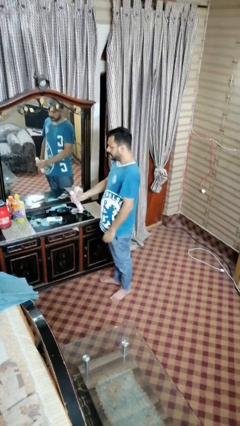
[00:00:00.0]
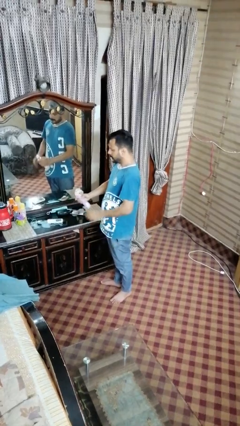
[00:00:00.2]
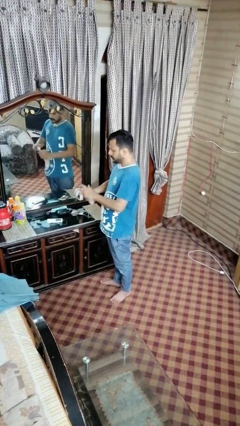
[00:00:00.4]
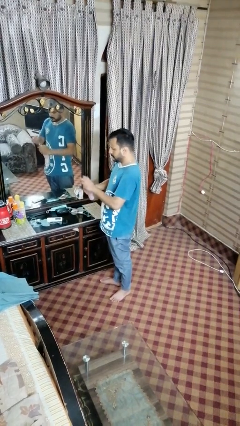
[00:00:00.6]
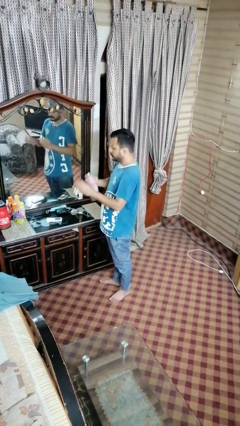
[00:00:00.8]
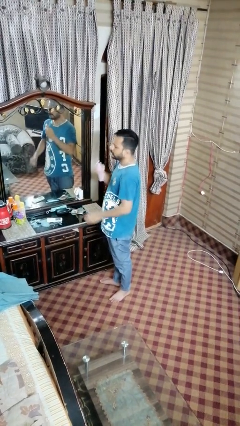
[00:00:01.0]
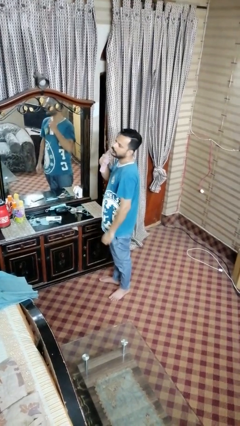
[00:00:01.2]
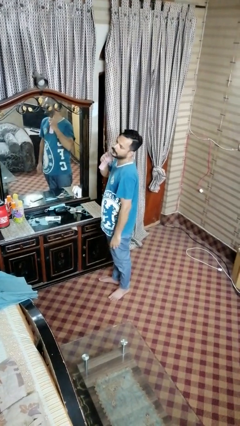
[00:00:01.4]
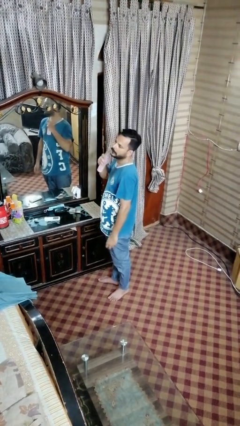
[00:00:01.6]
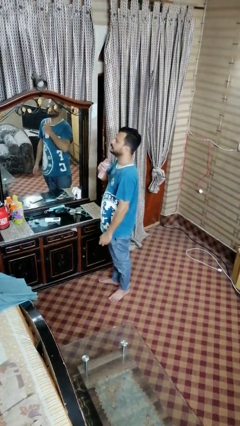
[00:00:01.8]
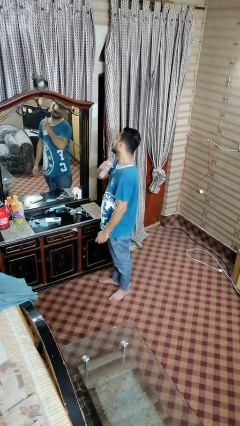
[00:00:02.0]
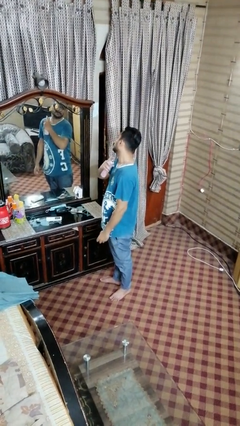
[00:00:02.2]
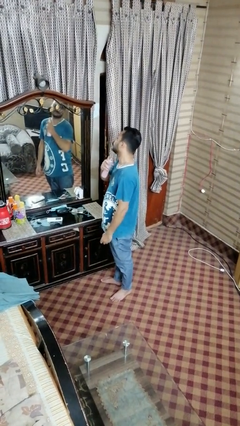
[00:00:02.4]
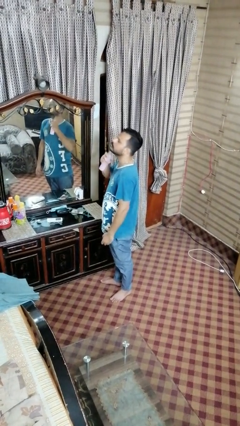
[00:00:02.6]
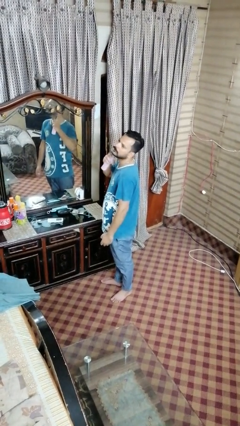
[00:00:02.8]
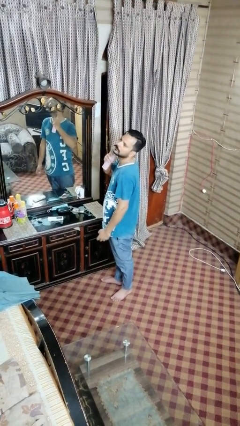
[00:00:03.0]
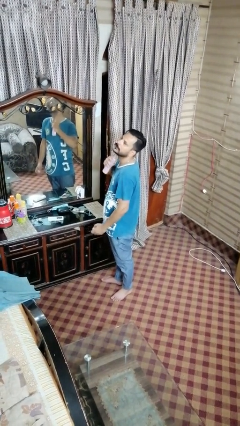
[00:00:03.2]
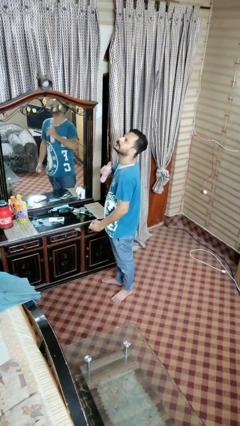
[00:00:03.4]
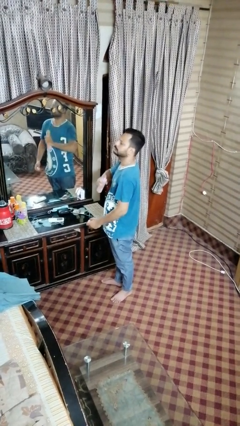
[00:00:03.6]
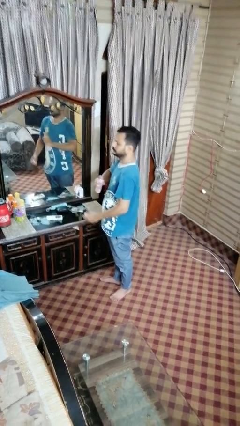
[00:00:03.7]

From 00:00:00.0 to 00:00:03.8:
person sprays from bottle

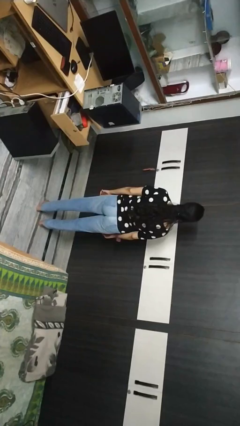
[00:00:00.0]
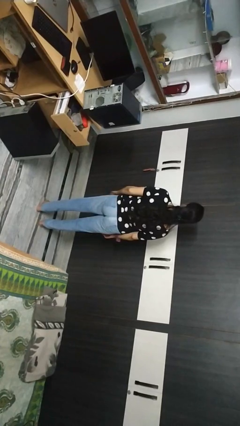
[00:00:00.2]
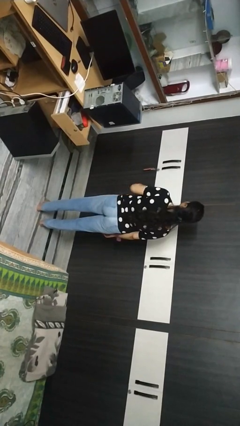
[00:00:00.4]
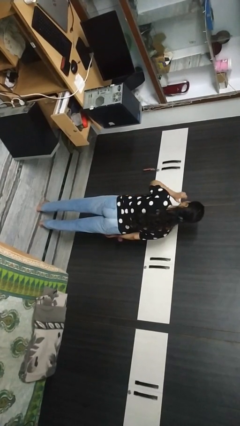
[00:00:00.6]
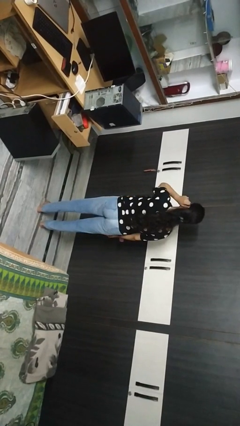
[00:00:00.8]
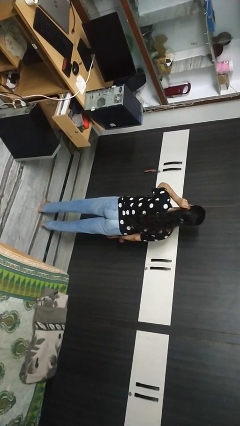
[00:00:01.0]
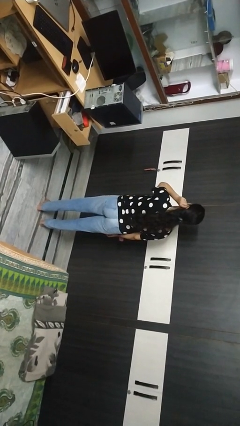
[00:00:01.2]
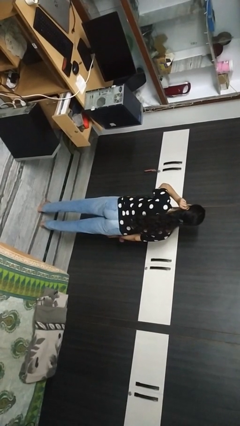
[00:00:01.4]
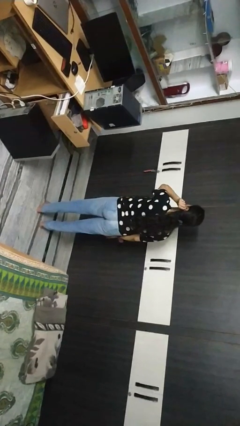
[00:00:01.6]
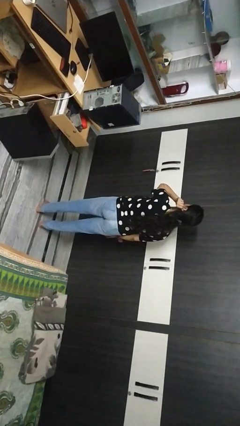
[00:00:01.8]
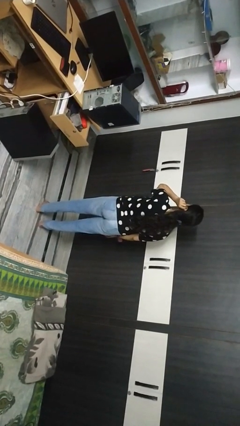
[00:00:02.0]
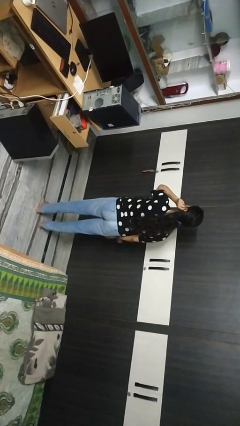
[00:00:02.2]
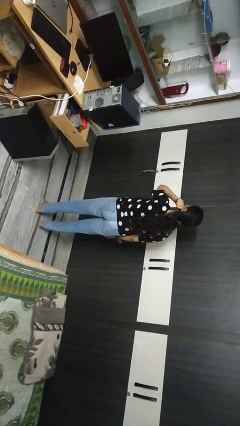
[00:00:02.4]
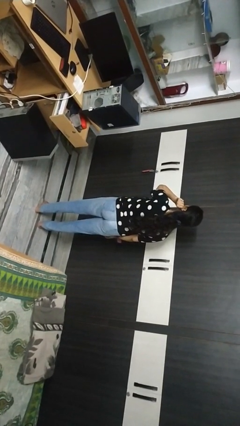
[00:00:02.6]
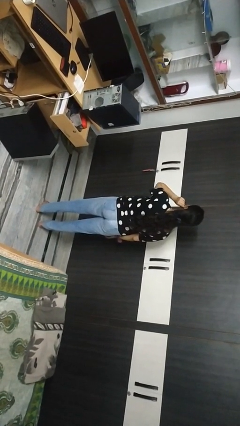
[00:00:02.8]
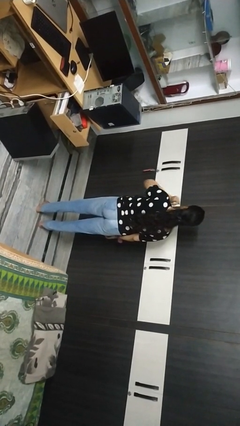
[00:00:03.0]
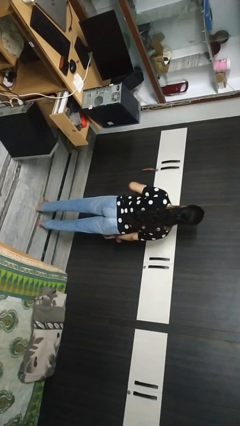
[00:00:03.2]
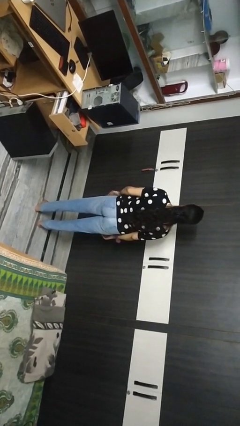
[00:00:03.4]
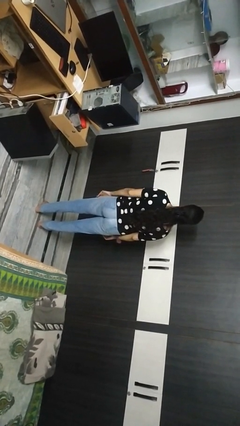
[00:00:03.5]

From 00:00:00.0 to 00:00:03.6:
person touches earlobe

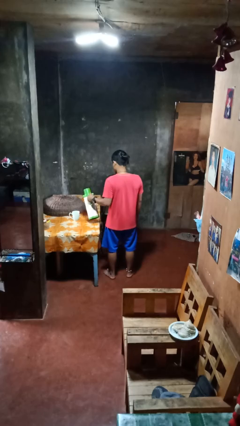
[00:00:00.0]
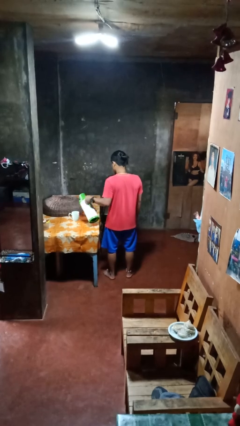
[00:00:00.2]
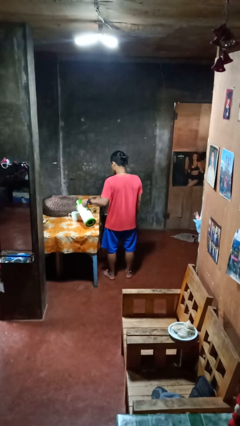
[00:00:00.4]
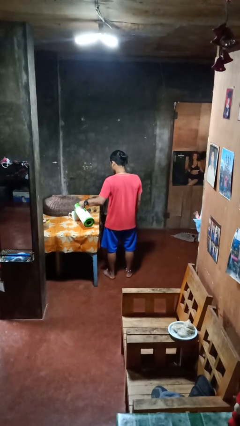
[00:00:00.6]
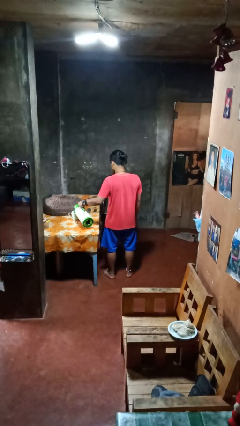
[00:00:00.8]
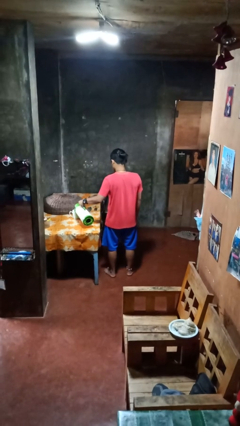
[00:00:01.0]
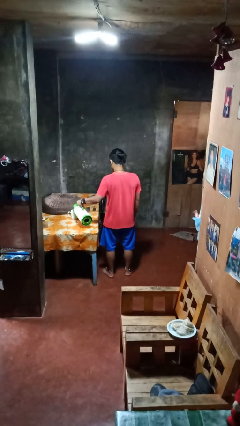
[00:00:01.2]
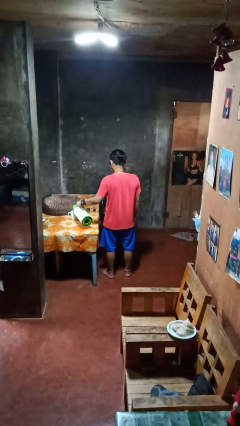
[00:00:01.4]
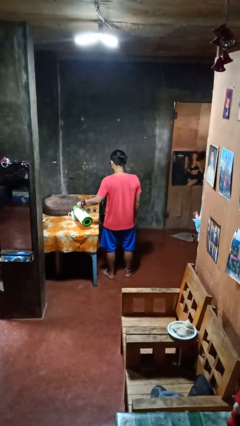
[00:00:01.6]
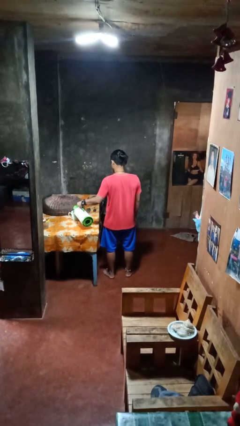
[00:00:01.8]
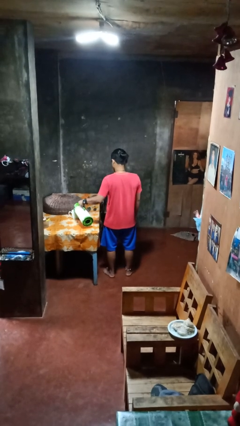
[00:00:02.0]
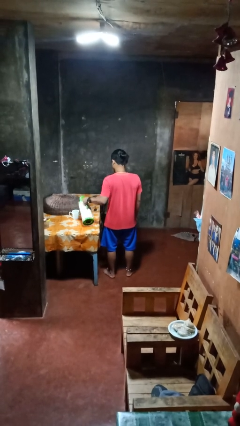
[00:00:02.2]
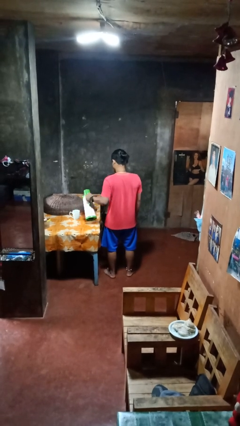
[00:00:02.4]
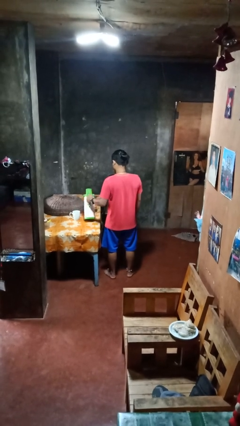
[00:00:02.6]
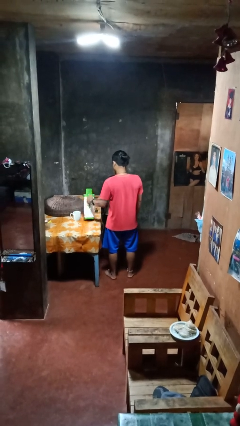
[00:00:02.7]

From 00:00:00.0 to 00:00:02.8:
person pours coffee into mug

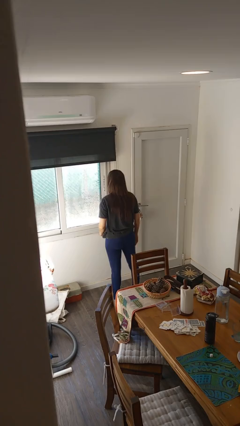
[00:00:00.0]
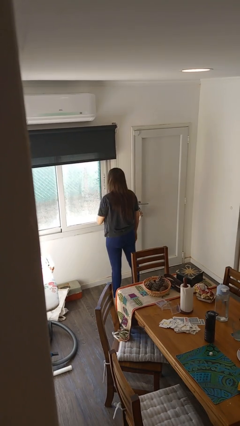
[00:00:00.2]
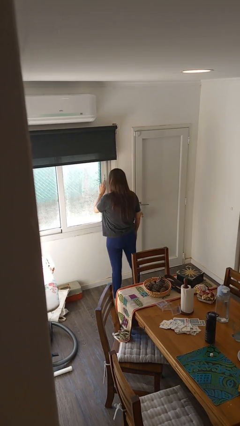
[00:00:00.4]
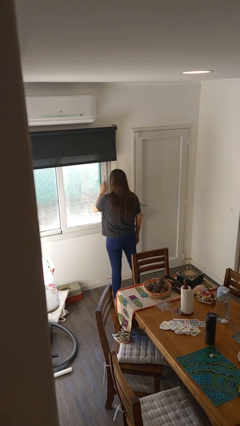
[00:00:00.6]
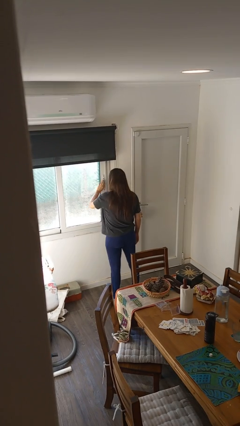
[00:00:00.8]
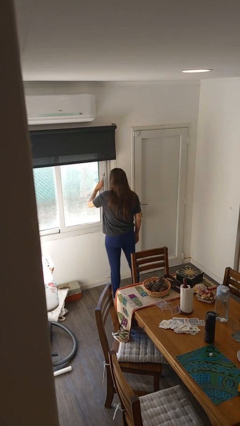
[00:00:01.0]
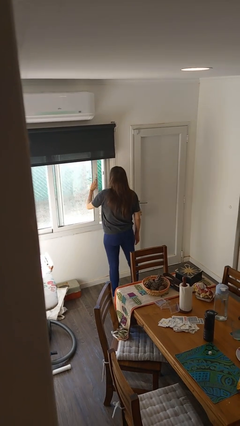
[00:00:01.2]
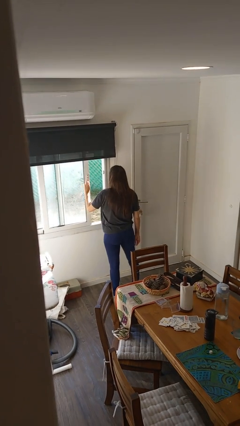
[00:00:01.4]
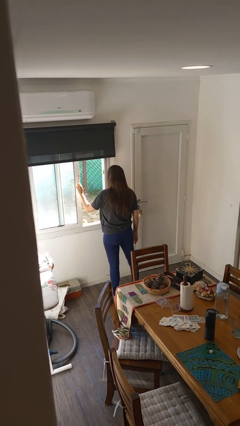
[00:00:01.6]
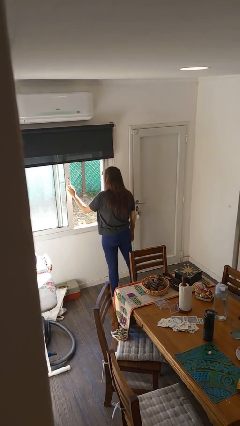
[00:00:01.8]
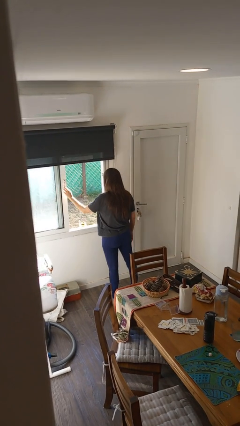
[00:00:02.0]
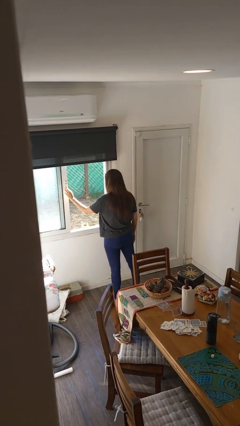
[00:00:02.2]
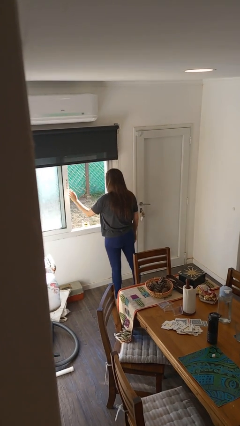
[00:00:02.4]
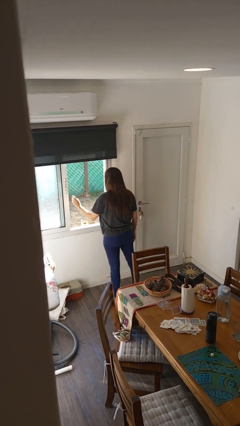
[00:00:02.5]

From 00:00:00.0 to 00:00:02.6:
person opens home window

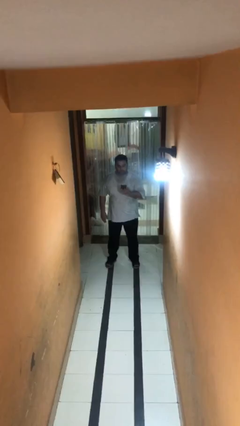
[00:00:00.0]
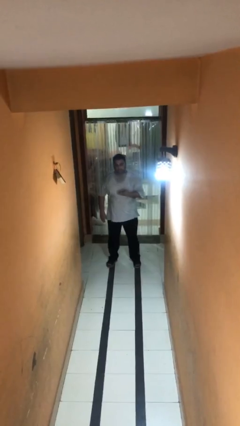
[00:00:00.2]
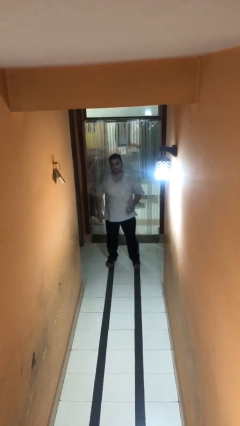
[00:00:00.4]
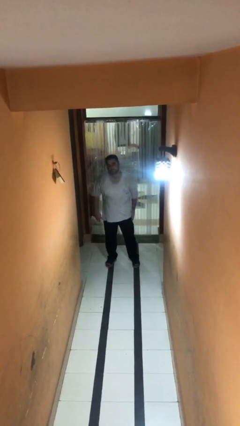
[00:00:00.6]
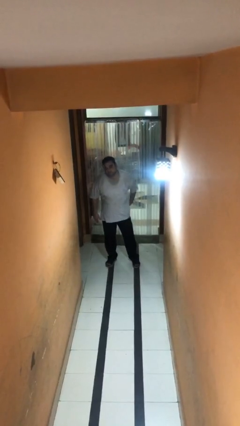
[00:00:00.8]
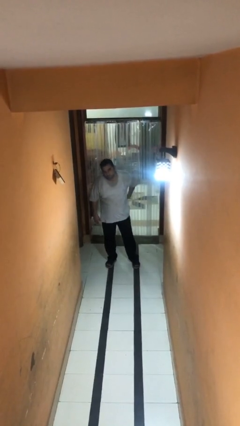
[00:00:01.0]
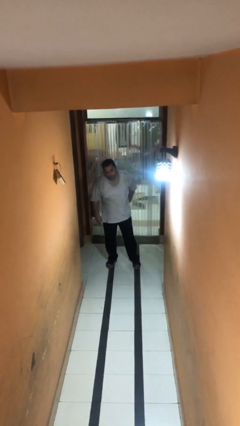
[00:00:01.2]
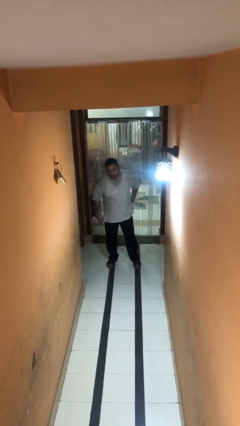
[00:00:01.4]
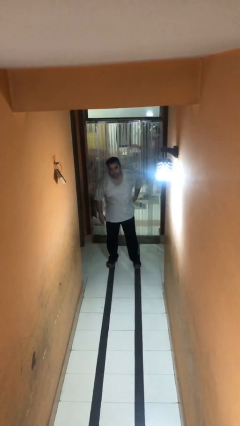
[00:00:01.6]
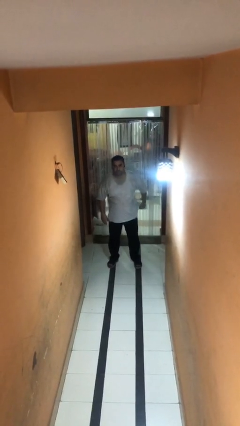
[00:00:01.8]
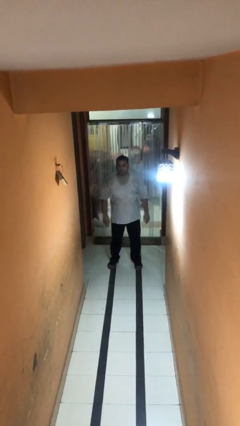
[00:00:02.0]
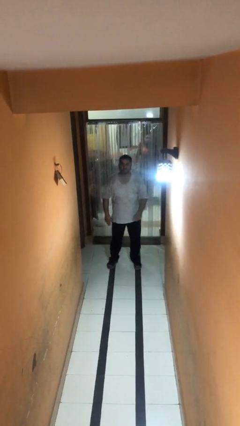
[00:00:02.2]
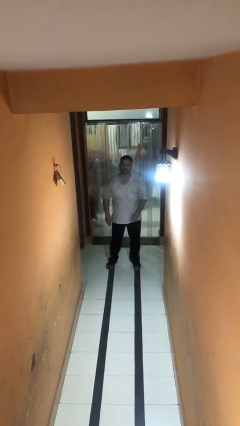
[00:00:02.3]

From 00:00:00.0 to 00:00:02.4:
person puts phone into pocket

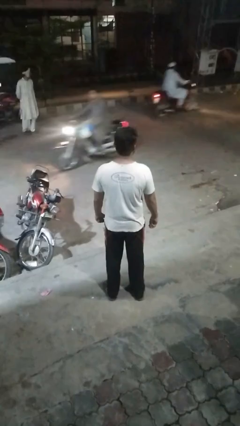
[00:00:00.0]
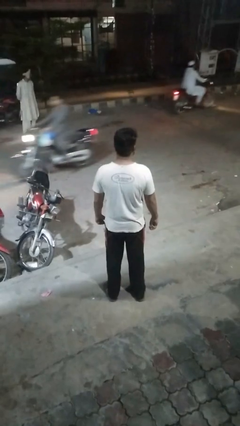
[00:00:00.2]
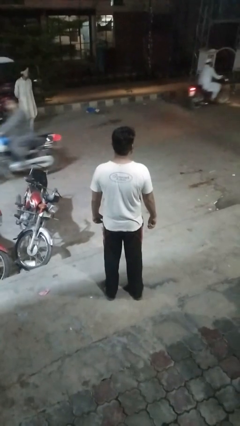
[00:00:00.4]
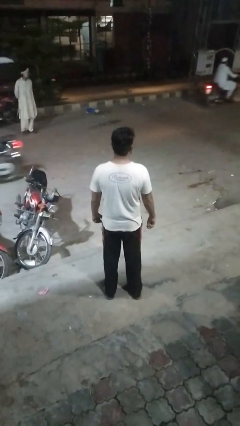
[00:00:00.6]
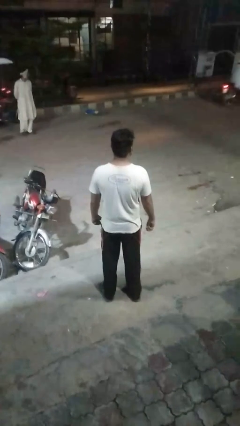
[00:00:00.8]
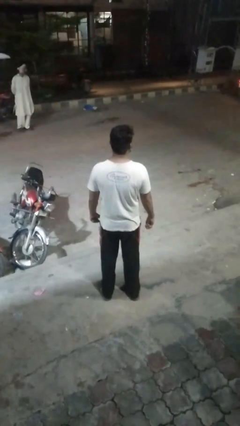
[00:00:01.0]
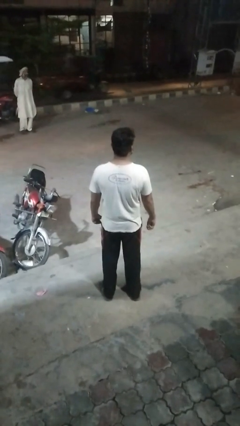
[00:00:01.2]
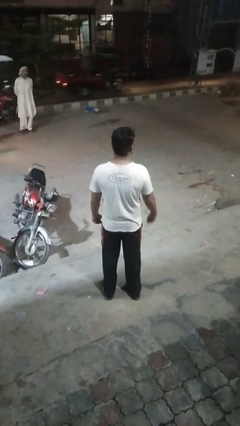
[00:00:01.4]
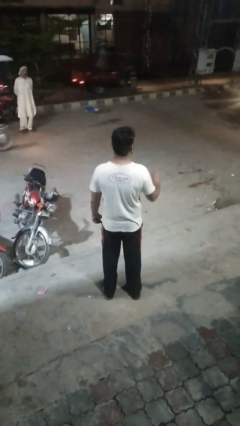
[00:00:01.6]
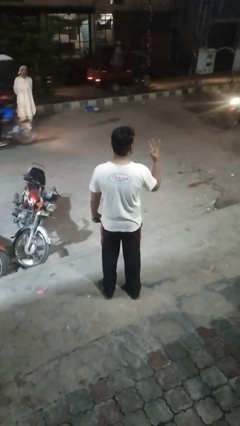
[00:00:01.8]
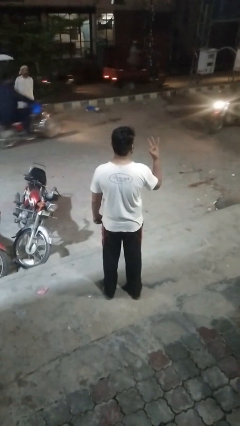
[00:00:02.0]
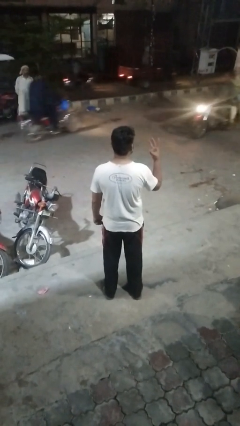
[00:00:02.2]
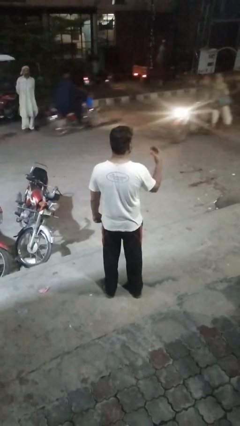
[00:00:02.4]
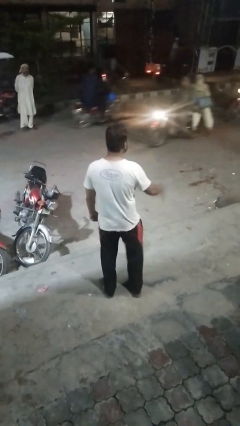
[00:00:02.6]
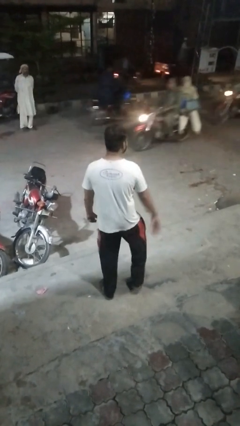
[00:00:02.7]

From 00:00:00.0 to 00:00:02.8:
person gestures number three
